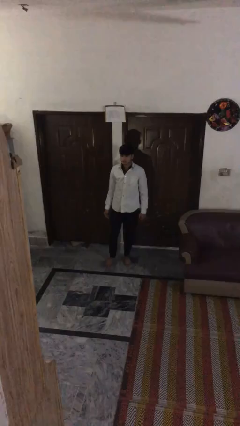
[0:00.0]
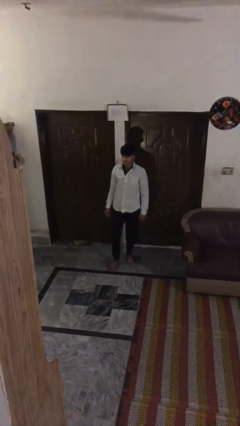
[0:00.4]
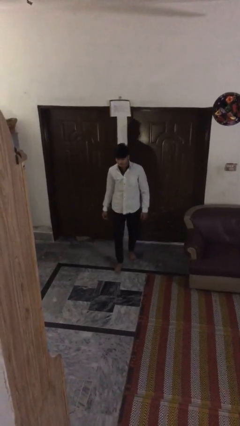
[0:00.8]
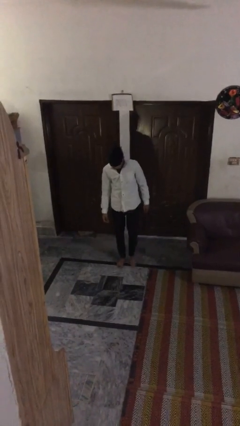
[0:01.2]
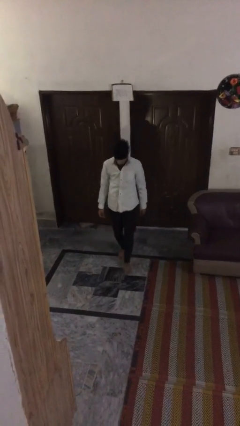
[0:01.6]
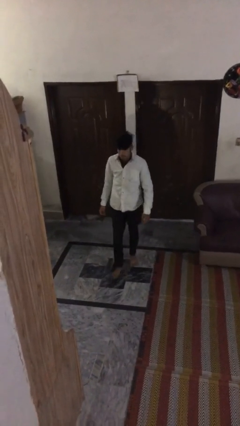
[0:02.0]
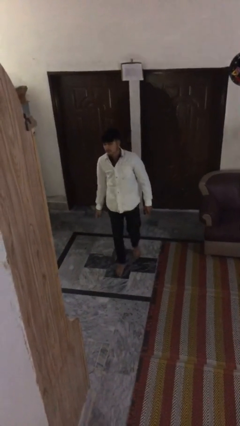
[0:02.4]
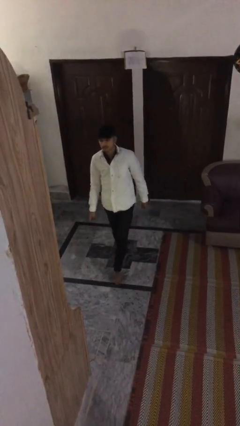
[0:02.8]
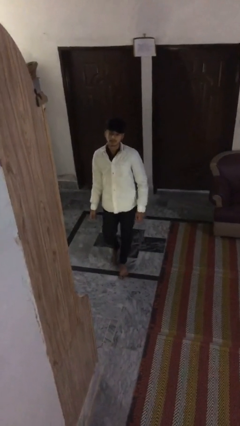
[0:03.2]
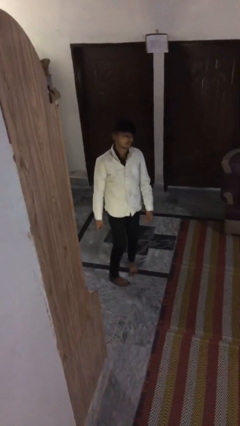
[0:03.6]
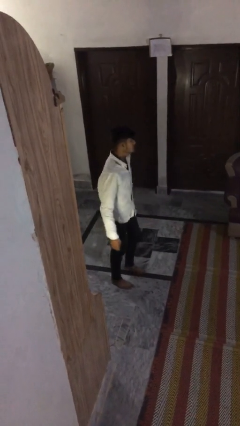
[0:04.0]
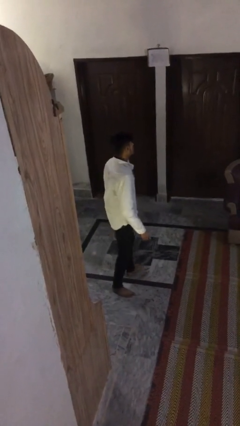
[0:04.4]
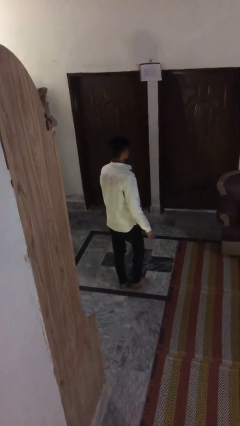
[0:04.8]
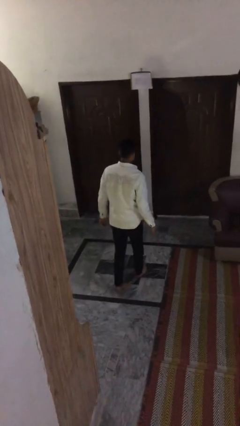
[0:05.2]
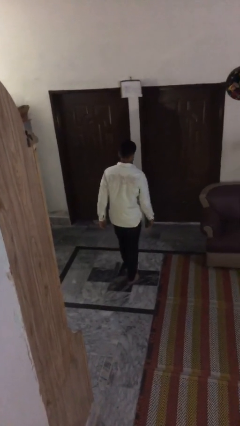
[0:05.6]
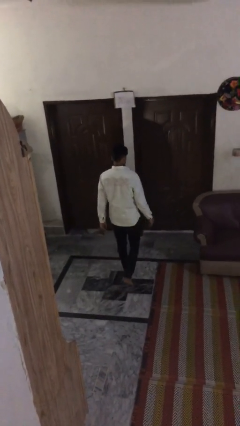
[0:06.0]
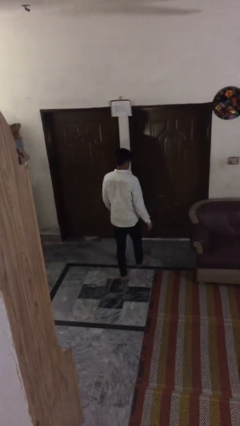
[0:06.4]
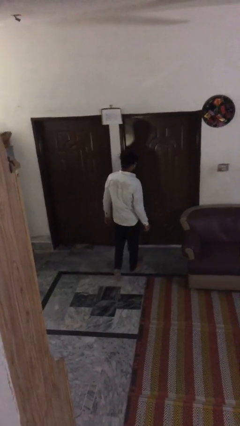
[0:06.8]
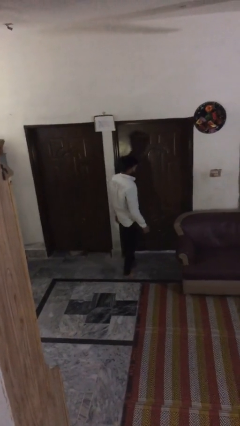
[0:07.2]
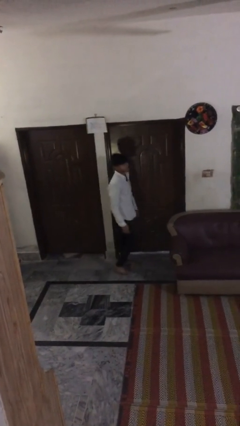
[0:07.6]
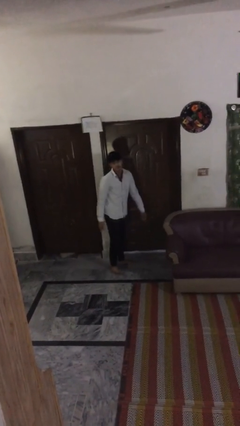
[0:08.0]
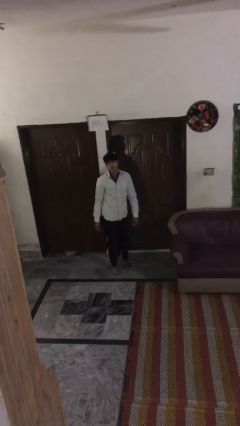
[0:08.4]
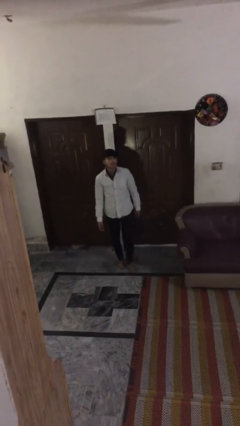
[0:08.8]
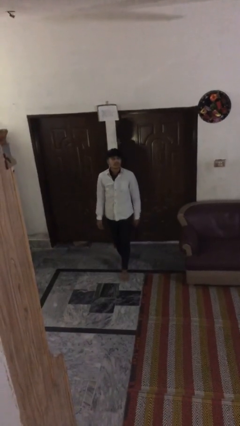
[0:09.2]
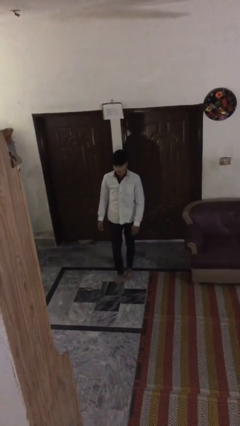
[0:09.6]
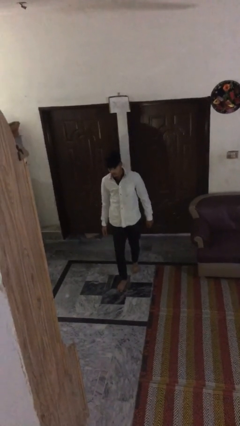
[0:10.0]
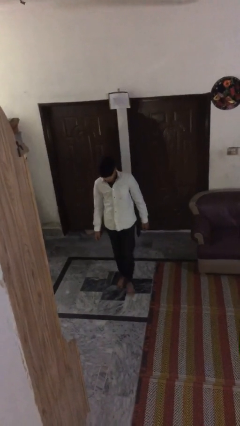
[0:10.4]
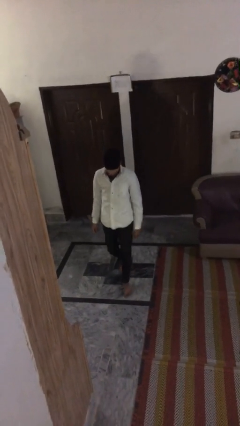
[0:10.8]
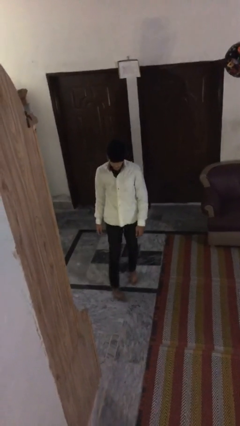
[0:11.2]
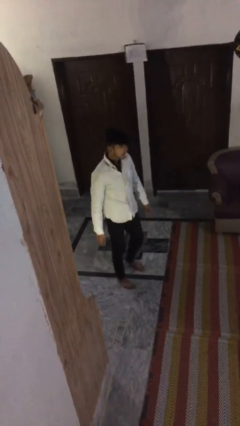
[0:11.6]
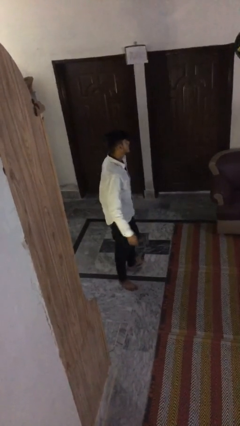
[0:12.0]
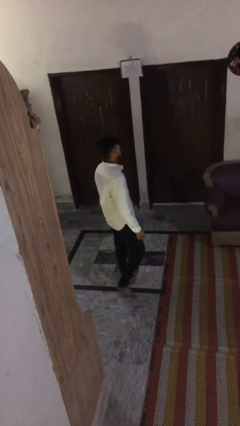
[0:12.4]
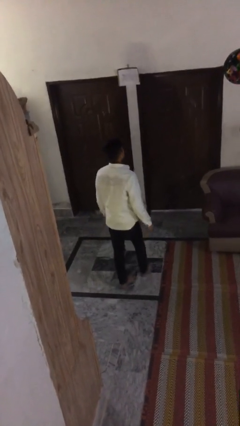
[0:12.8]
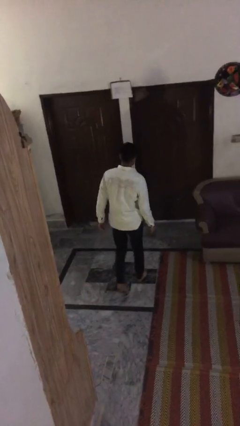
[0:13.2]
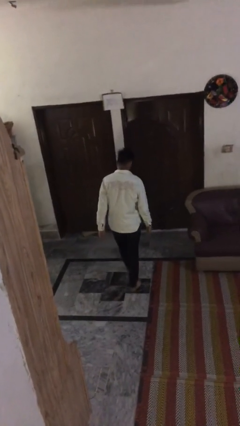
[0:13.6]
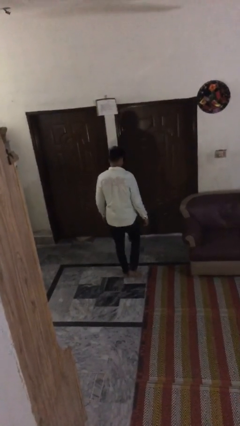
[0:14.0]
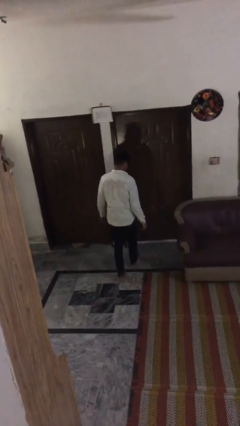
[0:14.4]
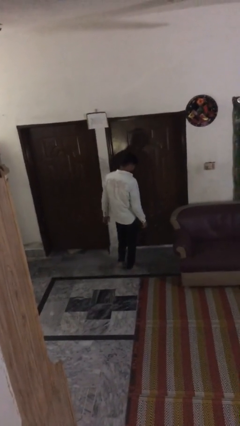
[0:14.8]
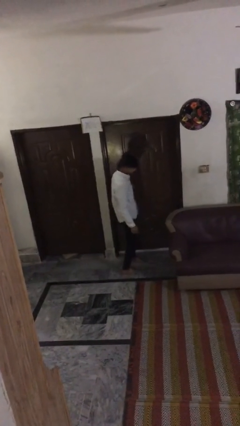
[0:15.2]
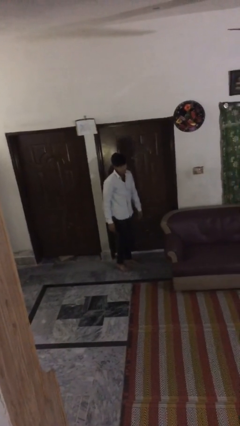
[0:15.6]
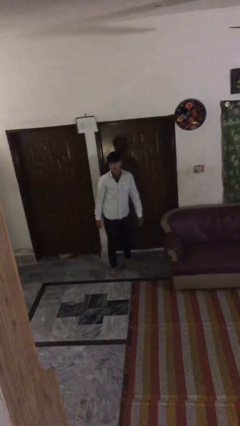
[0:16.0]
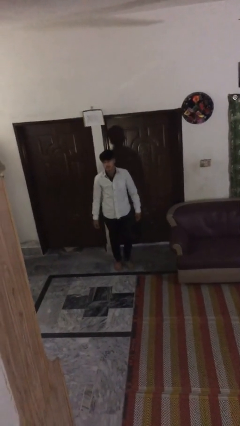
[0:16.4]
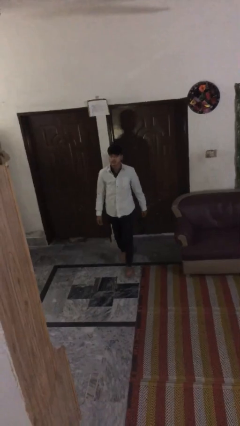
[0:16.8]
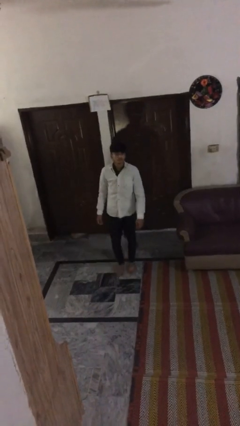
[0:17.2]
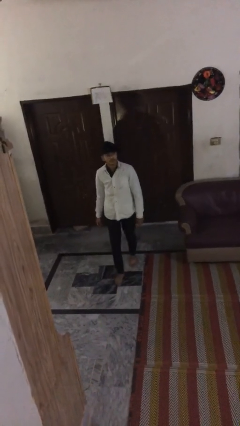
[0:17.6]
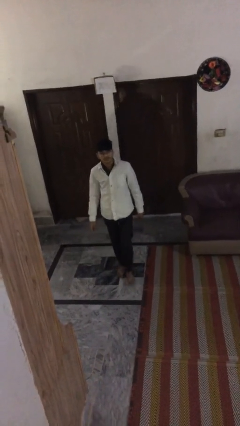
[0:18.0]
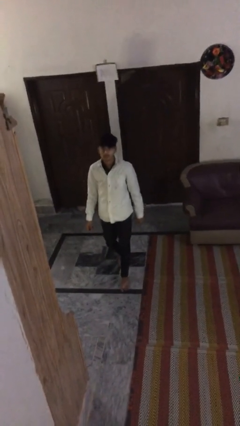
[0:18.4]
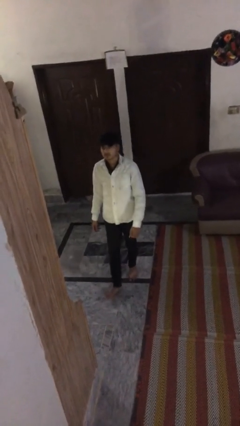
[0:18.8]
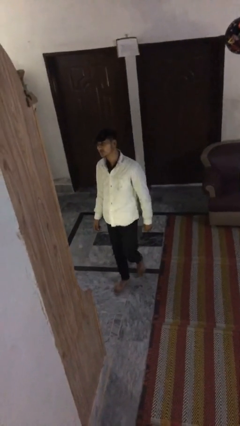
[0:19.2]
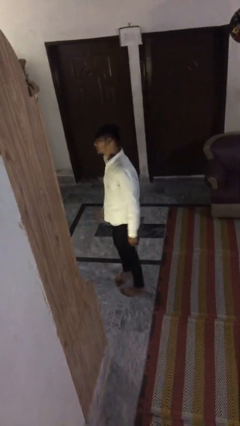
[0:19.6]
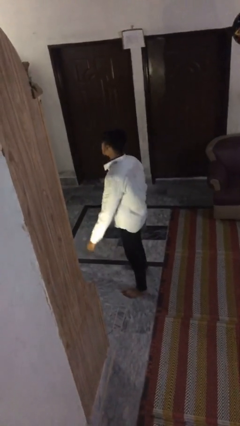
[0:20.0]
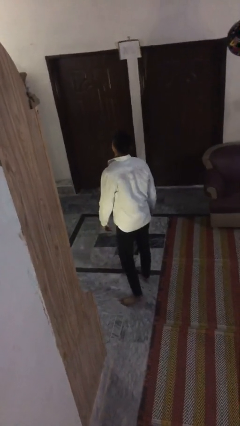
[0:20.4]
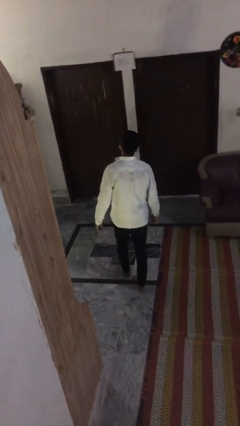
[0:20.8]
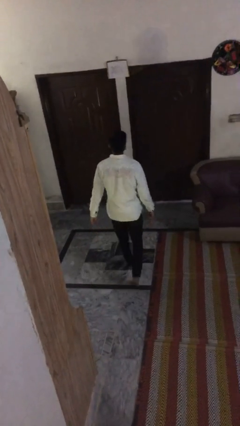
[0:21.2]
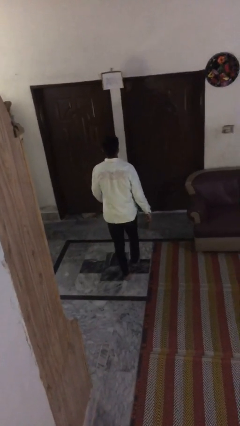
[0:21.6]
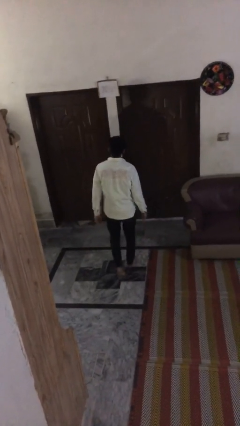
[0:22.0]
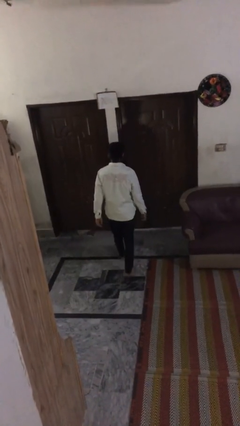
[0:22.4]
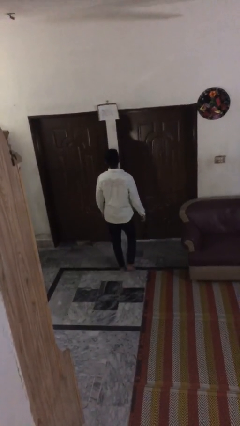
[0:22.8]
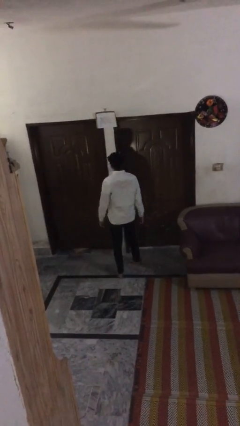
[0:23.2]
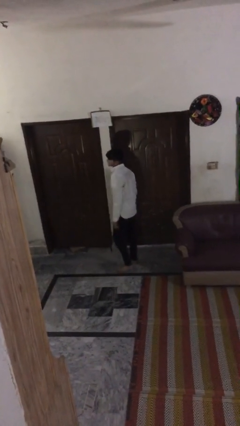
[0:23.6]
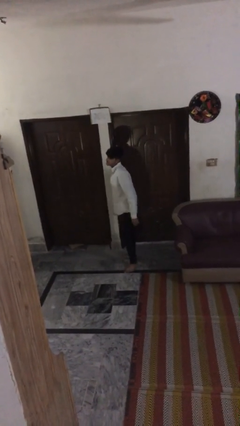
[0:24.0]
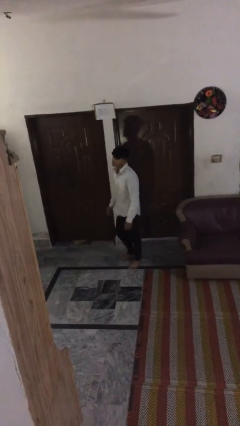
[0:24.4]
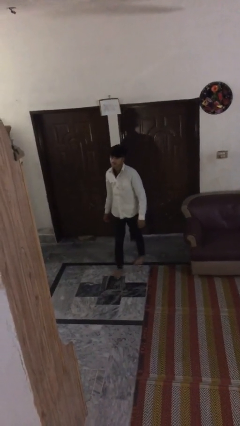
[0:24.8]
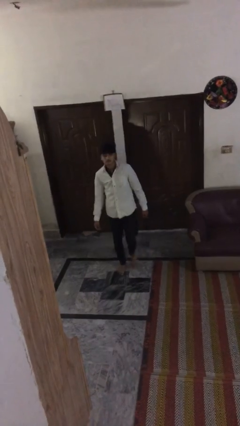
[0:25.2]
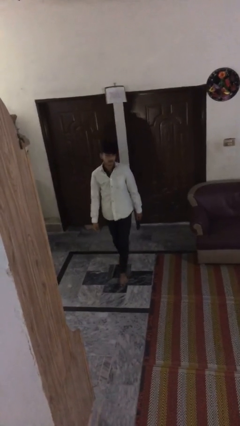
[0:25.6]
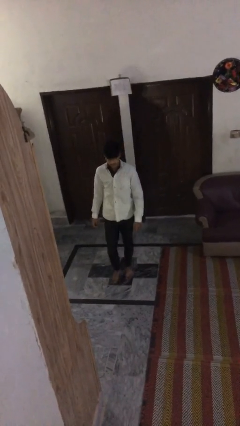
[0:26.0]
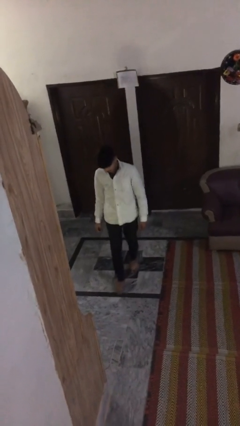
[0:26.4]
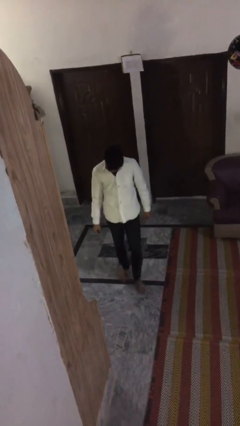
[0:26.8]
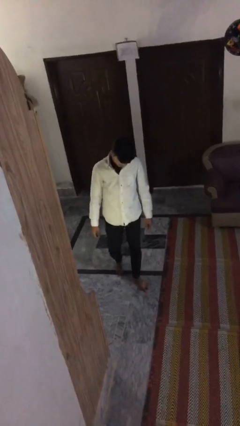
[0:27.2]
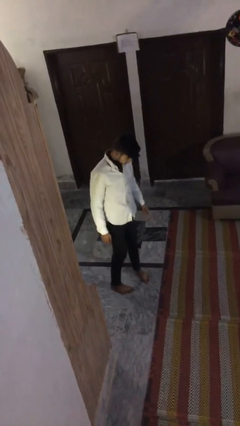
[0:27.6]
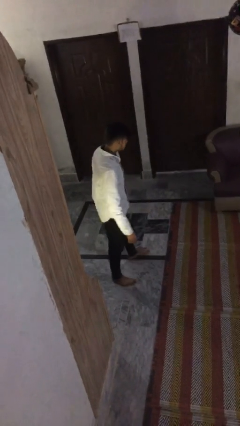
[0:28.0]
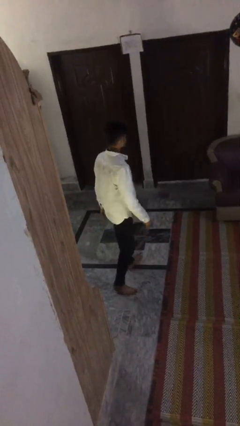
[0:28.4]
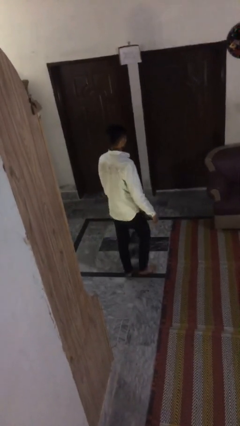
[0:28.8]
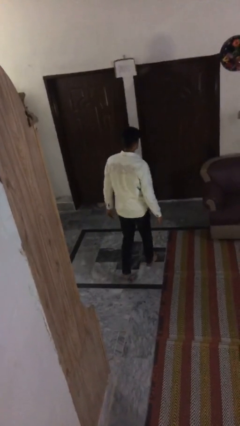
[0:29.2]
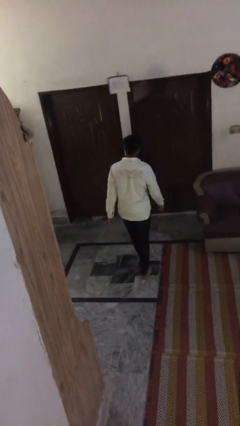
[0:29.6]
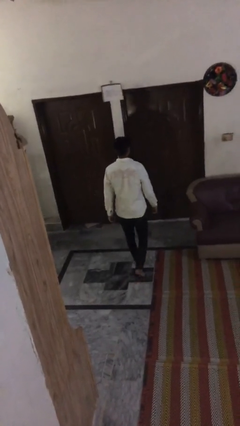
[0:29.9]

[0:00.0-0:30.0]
person walks

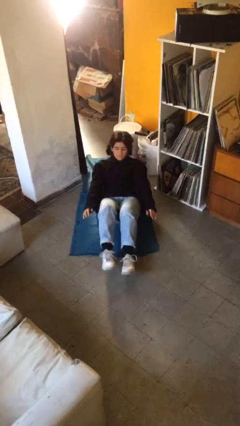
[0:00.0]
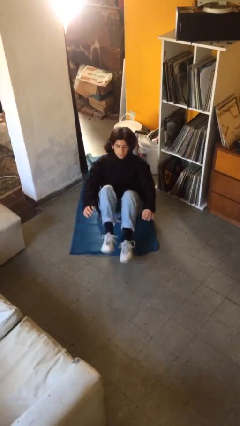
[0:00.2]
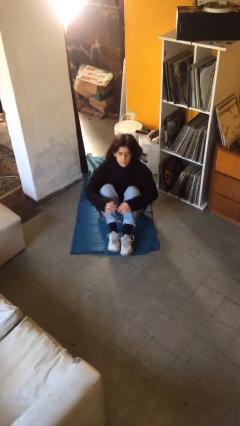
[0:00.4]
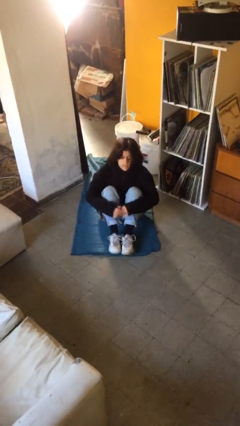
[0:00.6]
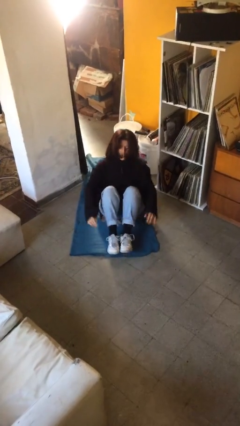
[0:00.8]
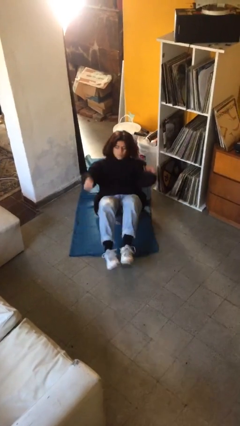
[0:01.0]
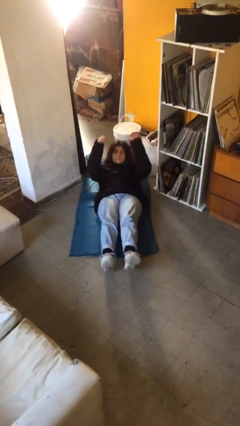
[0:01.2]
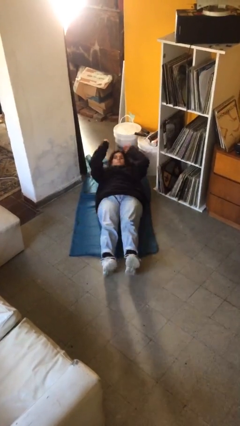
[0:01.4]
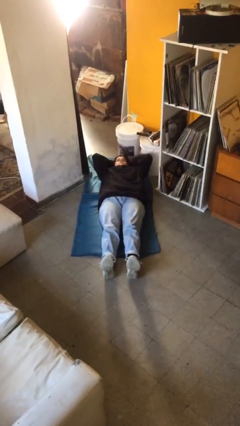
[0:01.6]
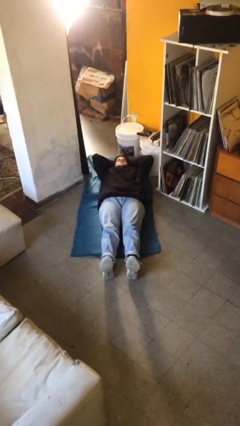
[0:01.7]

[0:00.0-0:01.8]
person exercises with situp

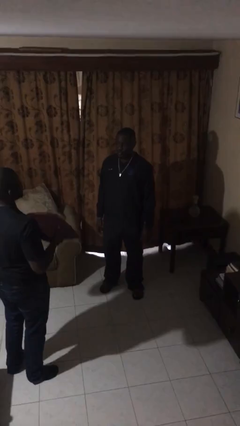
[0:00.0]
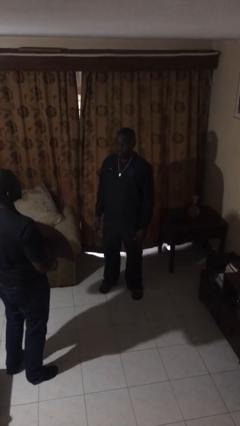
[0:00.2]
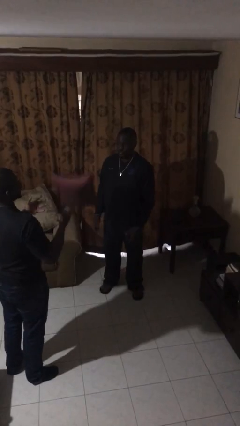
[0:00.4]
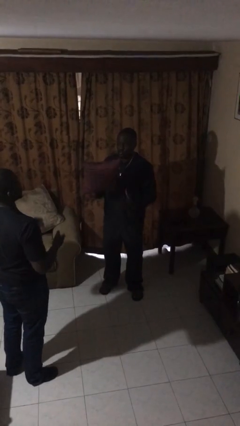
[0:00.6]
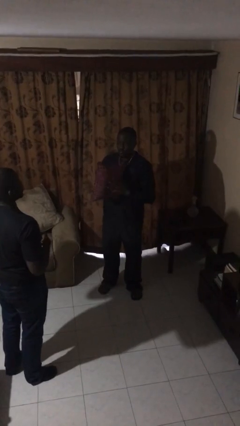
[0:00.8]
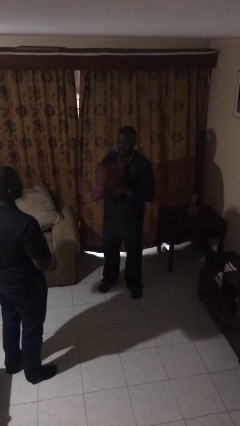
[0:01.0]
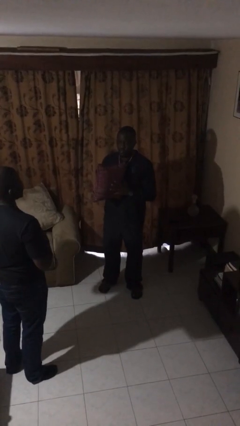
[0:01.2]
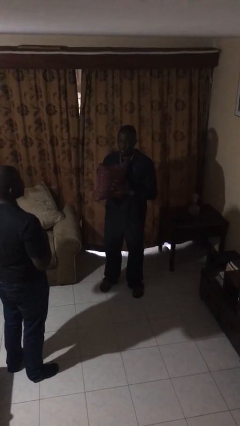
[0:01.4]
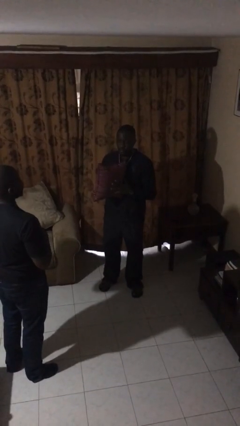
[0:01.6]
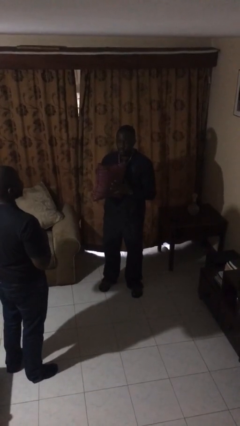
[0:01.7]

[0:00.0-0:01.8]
person catches object from person
